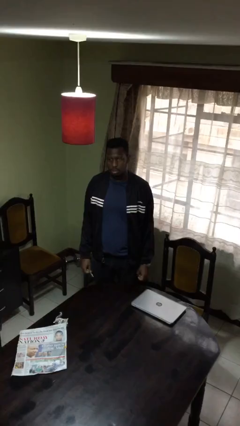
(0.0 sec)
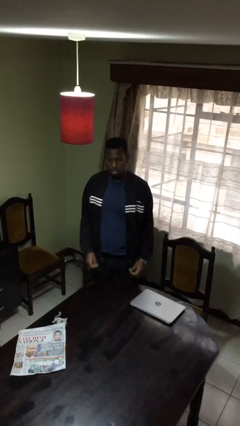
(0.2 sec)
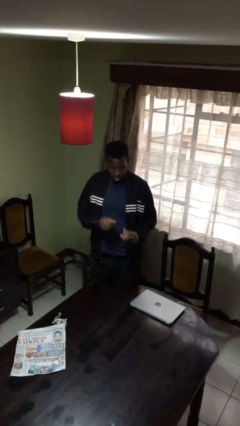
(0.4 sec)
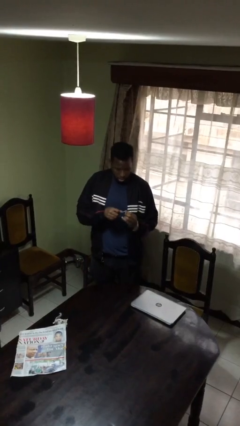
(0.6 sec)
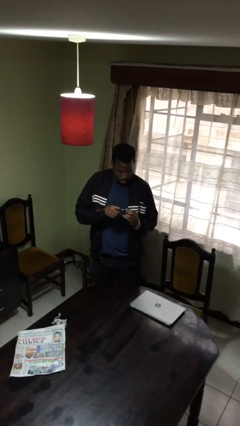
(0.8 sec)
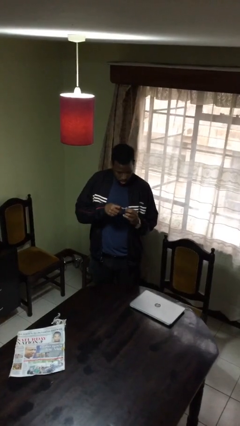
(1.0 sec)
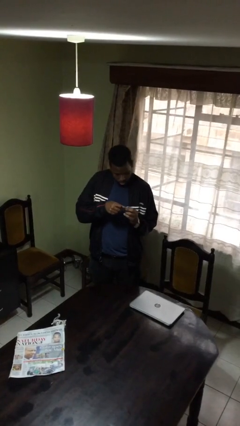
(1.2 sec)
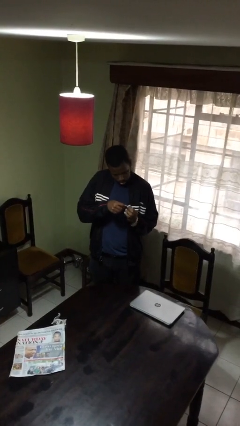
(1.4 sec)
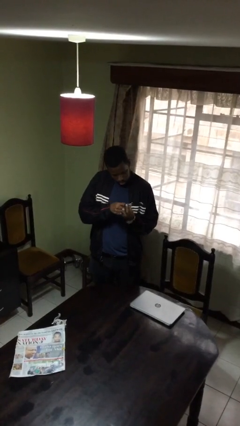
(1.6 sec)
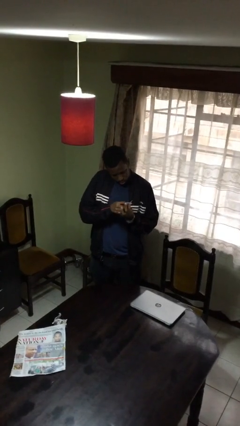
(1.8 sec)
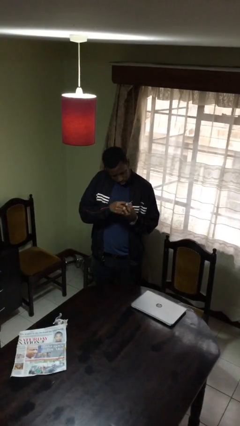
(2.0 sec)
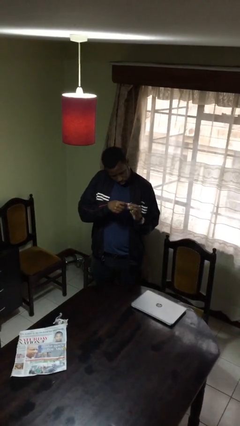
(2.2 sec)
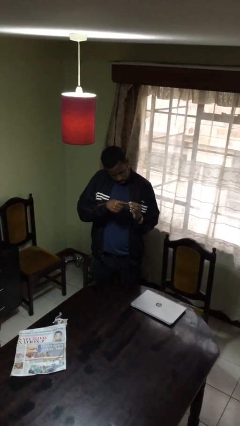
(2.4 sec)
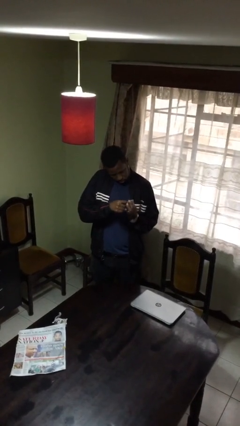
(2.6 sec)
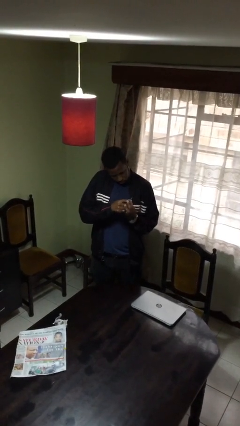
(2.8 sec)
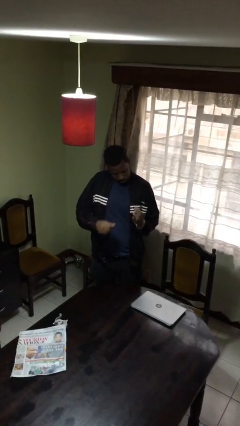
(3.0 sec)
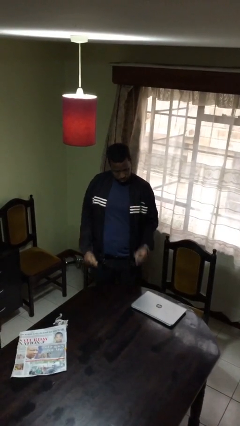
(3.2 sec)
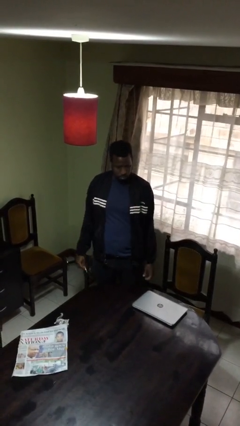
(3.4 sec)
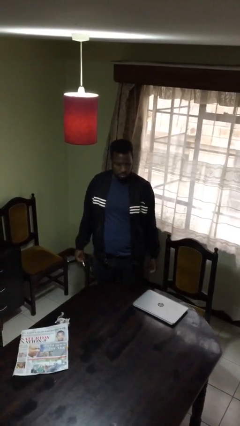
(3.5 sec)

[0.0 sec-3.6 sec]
person files fingernails

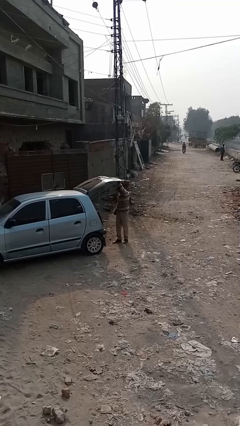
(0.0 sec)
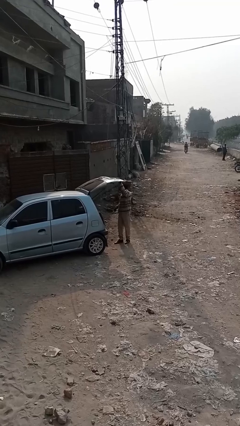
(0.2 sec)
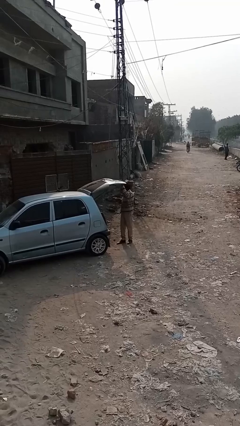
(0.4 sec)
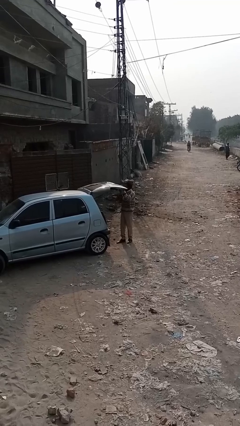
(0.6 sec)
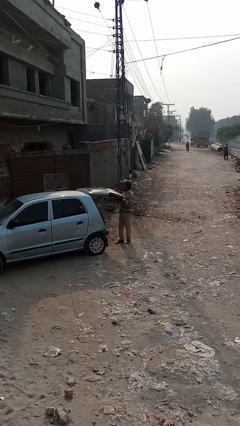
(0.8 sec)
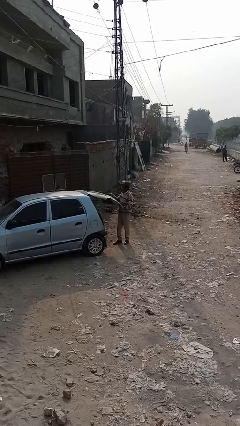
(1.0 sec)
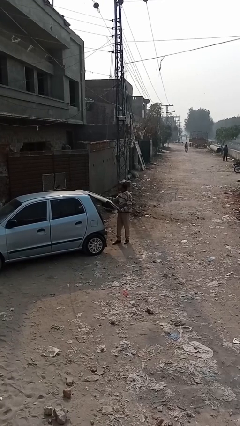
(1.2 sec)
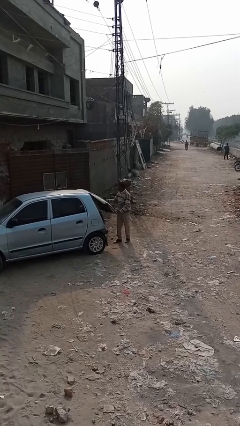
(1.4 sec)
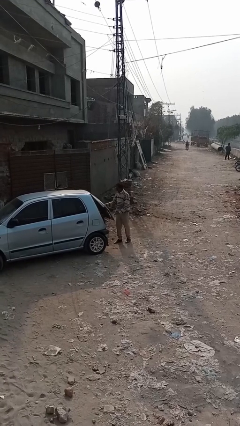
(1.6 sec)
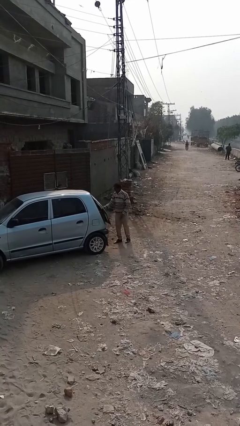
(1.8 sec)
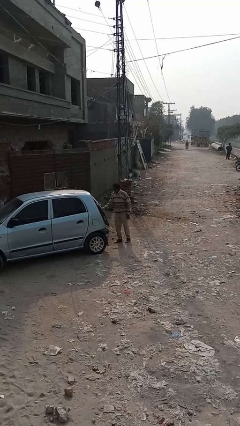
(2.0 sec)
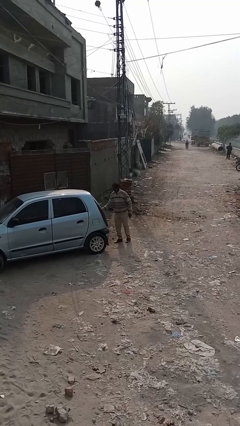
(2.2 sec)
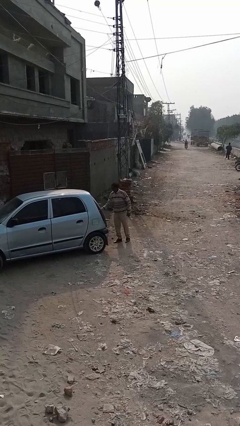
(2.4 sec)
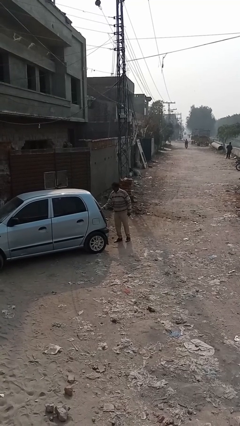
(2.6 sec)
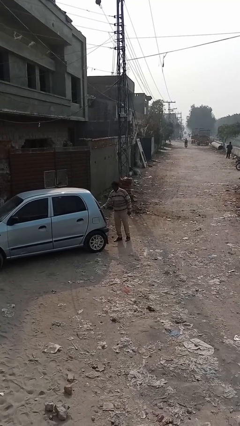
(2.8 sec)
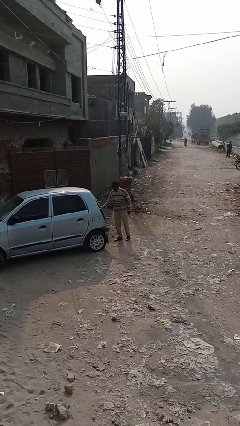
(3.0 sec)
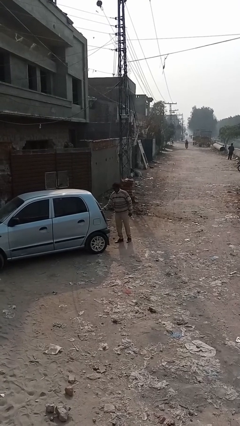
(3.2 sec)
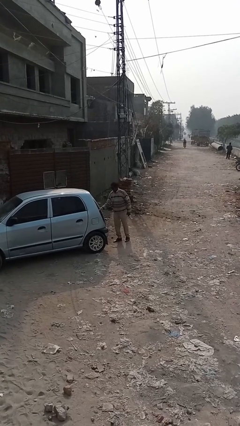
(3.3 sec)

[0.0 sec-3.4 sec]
person closes car trunk

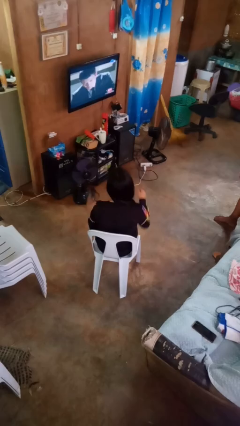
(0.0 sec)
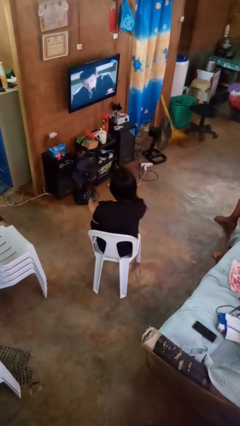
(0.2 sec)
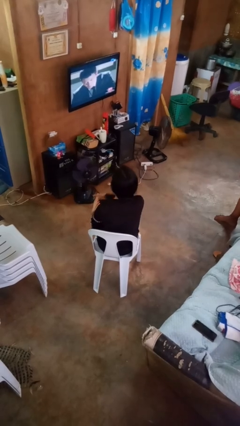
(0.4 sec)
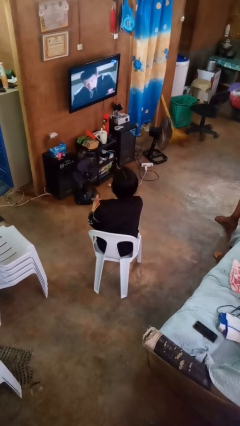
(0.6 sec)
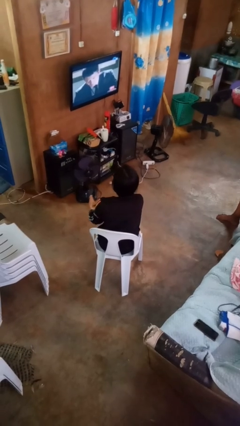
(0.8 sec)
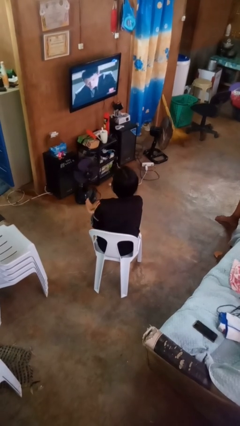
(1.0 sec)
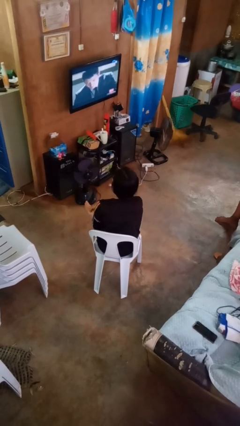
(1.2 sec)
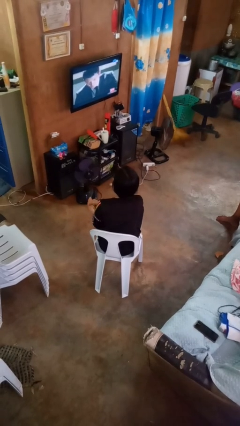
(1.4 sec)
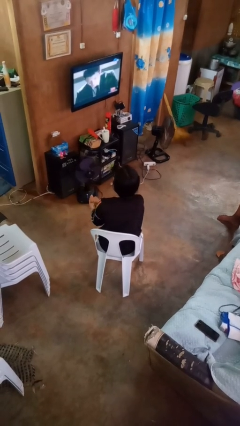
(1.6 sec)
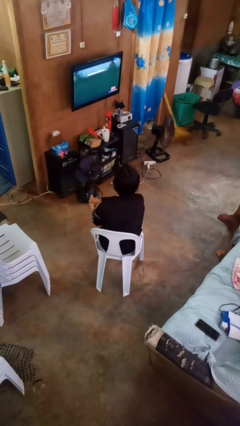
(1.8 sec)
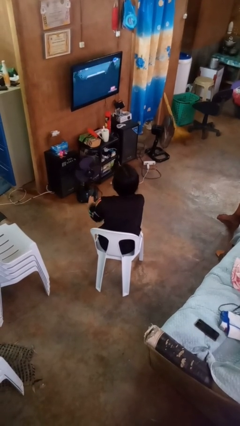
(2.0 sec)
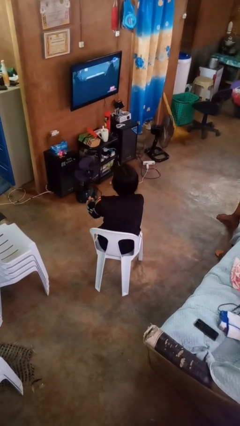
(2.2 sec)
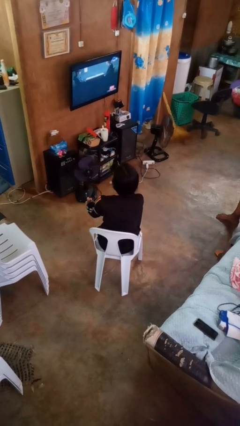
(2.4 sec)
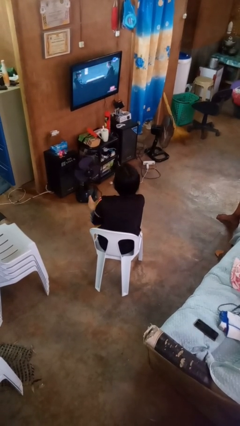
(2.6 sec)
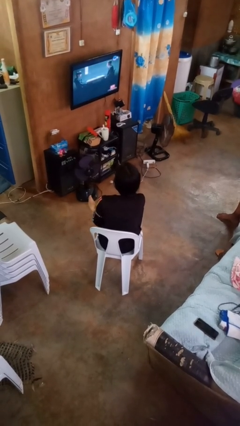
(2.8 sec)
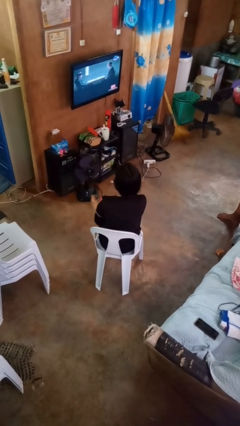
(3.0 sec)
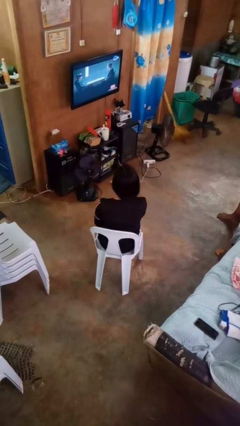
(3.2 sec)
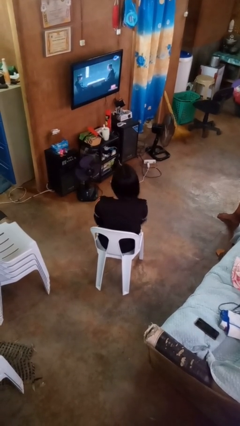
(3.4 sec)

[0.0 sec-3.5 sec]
person rubs foot

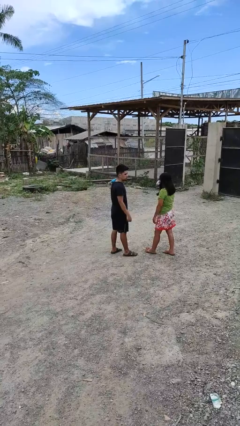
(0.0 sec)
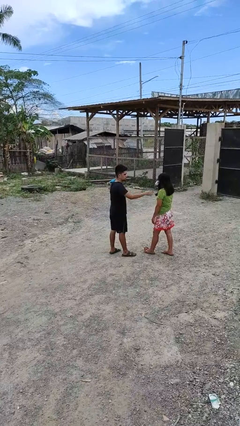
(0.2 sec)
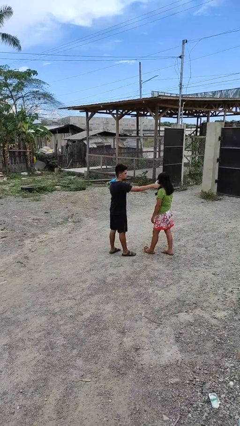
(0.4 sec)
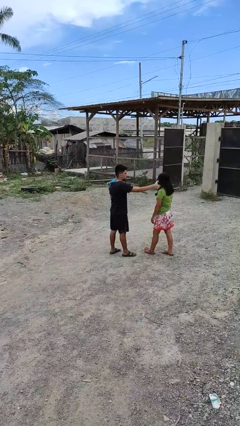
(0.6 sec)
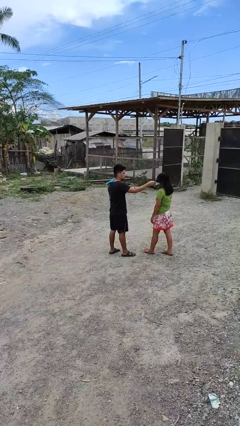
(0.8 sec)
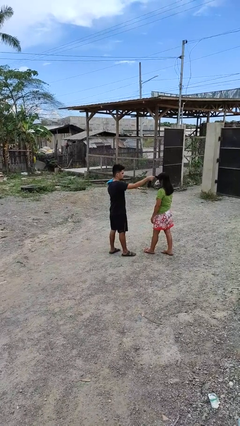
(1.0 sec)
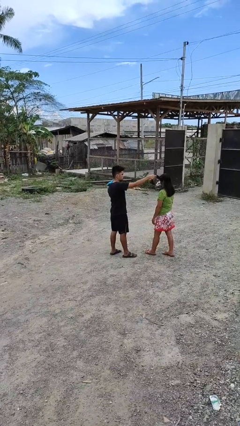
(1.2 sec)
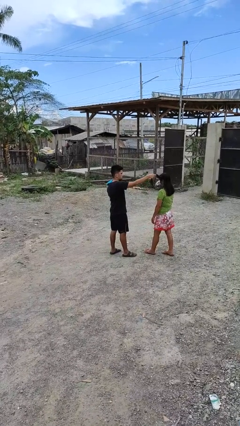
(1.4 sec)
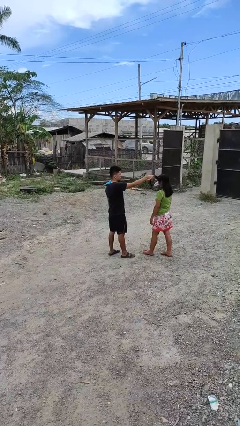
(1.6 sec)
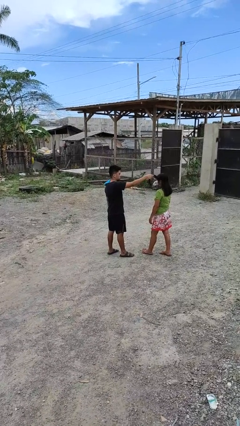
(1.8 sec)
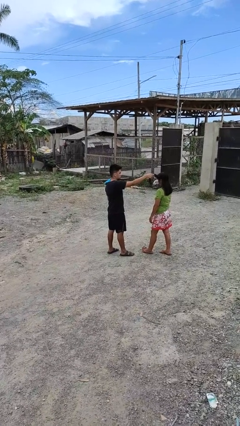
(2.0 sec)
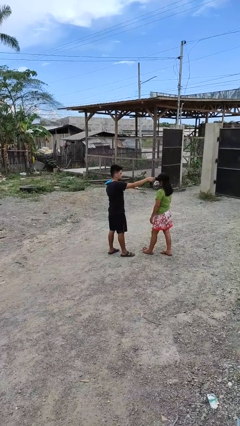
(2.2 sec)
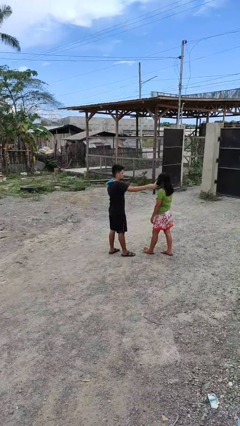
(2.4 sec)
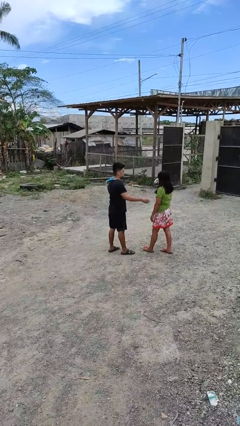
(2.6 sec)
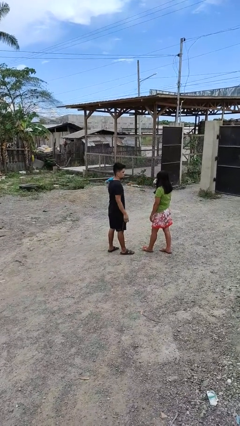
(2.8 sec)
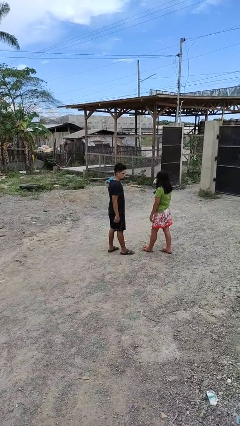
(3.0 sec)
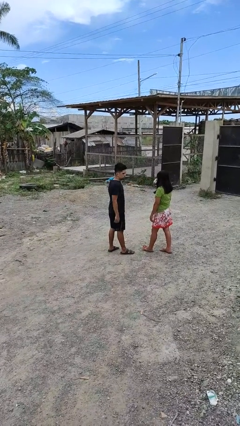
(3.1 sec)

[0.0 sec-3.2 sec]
person grabs person by hair

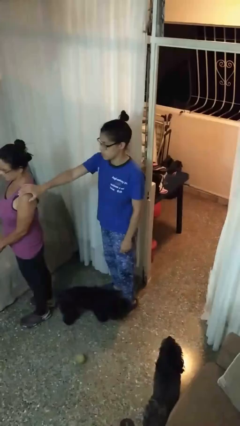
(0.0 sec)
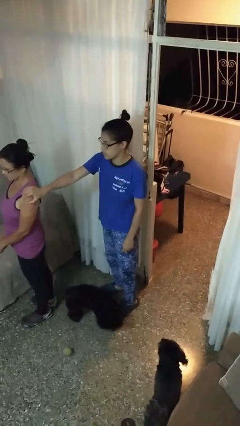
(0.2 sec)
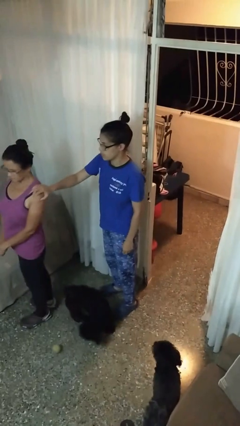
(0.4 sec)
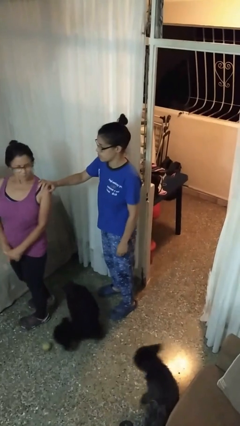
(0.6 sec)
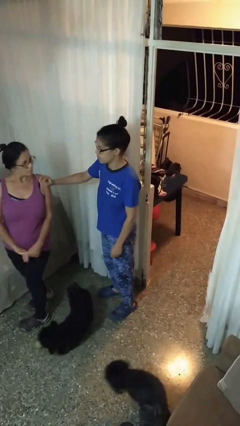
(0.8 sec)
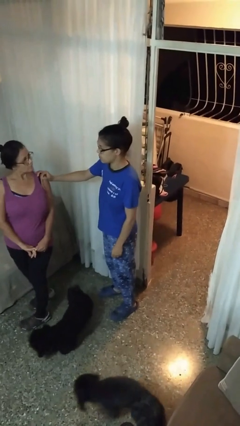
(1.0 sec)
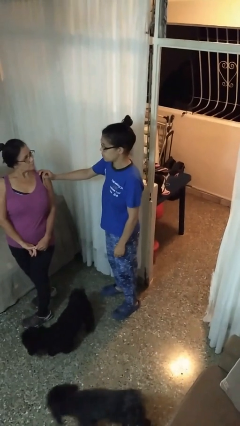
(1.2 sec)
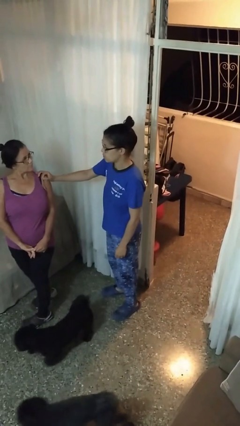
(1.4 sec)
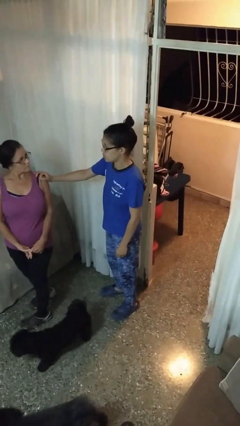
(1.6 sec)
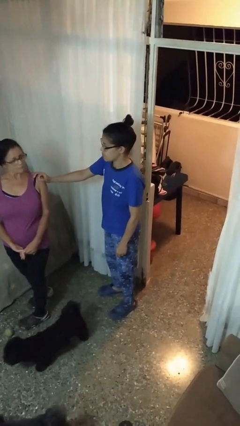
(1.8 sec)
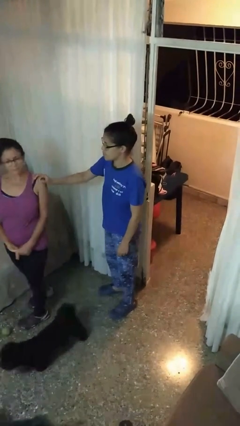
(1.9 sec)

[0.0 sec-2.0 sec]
person spins person around

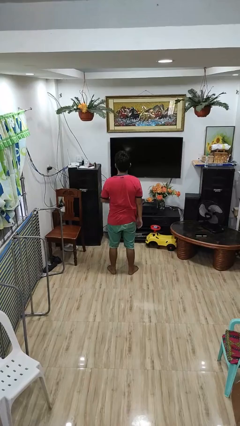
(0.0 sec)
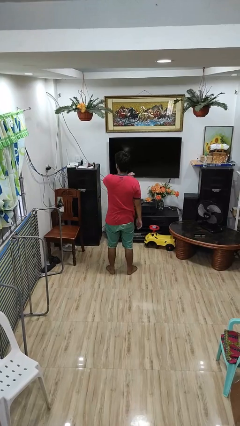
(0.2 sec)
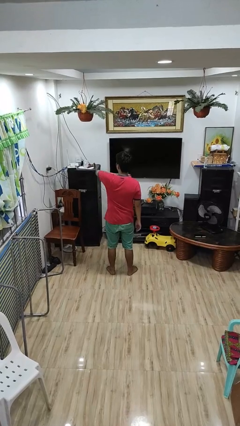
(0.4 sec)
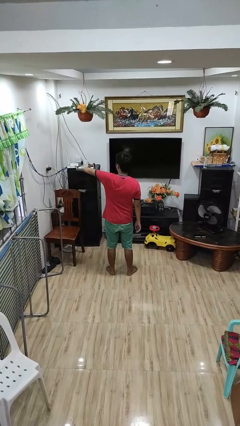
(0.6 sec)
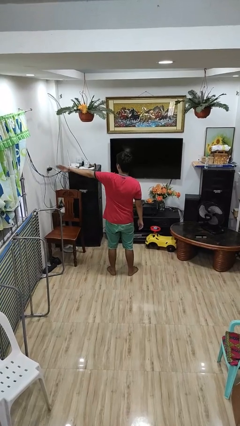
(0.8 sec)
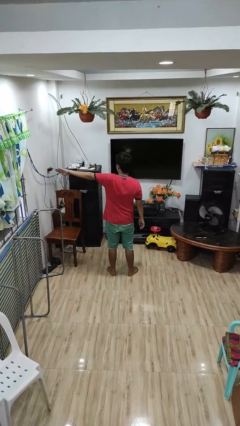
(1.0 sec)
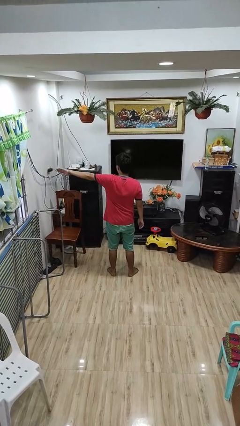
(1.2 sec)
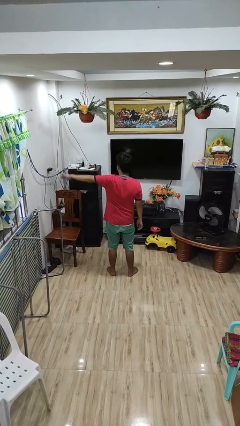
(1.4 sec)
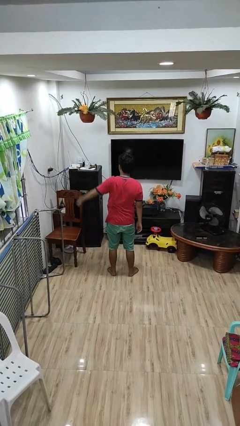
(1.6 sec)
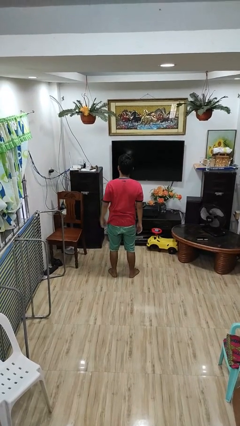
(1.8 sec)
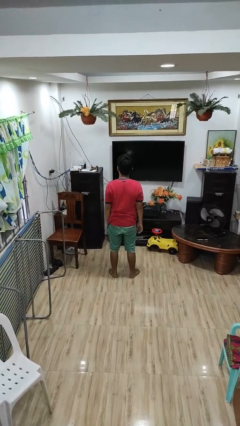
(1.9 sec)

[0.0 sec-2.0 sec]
person gestures swipe left
